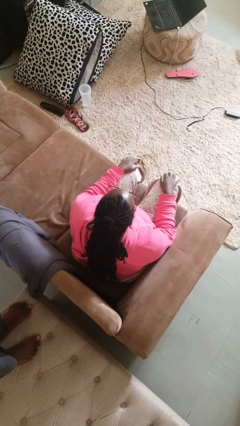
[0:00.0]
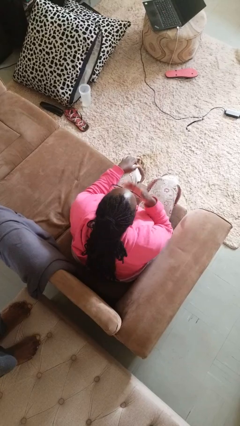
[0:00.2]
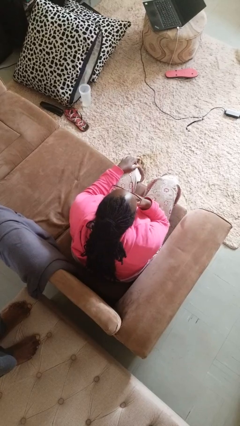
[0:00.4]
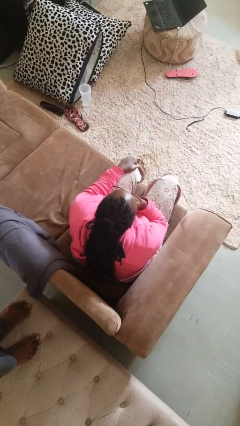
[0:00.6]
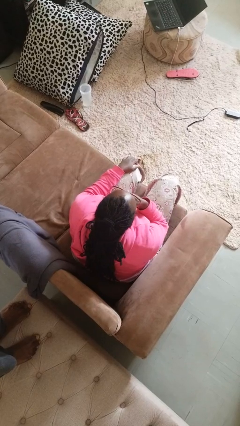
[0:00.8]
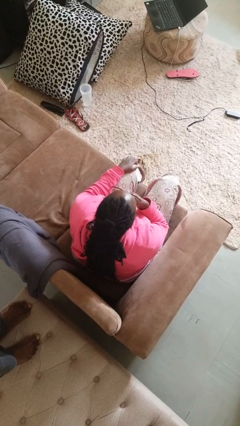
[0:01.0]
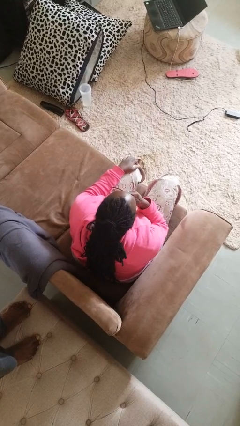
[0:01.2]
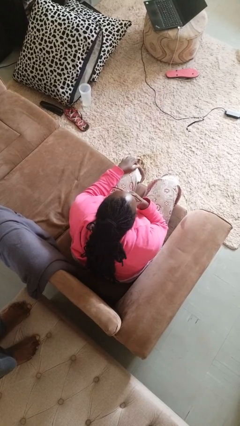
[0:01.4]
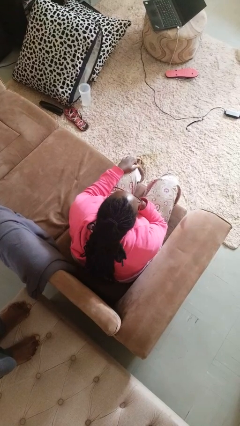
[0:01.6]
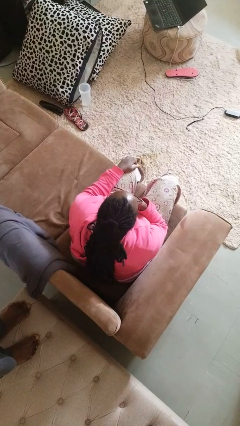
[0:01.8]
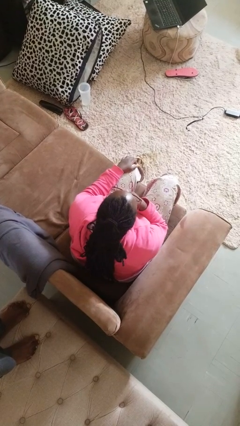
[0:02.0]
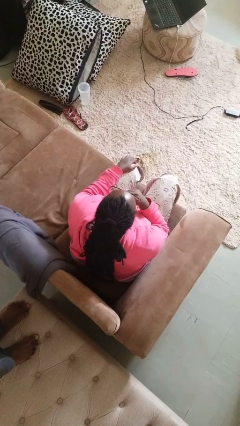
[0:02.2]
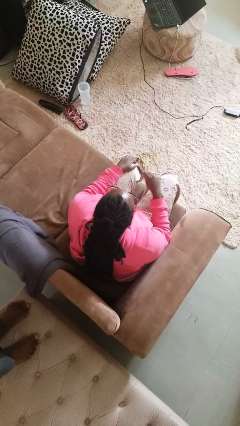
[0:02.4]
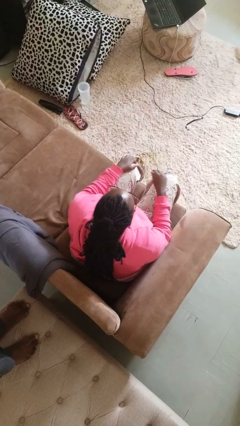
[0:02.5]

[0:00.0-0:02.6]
person strokes chin

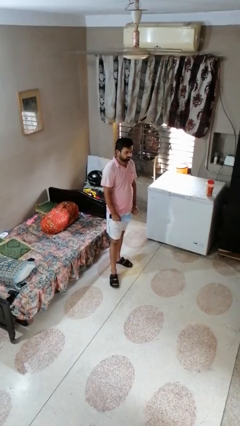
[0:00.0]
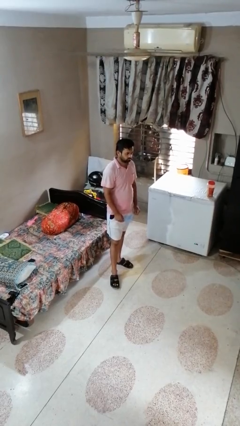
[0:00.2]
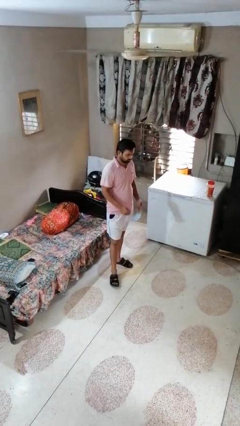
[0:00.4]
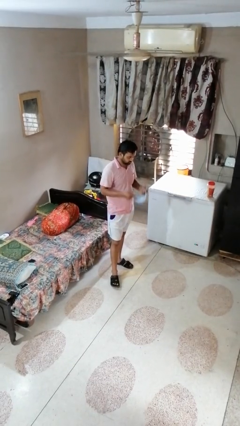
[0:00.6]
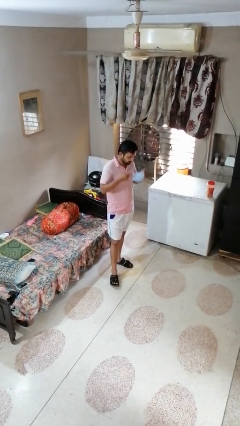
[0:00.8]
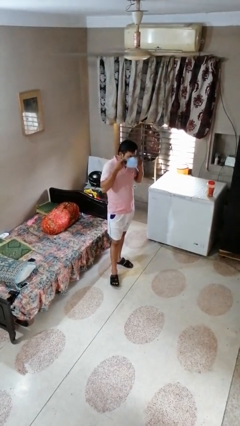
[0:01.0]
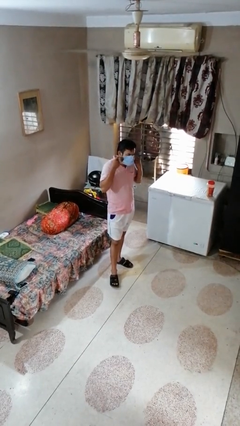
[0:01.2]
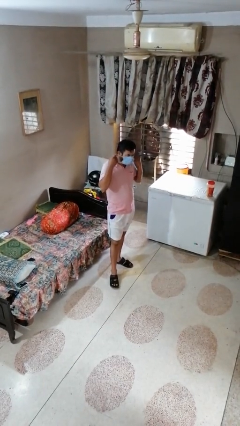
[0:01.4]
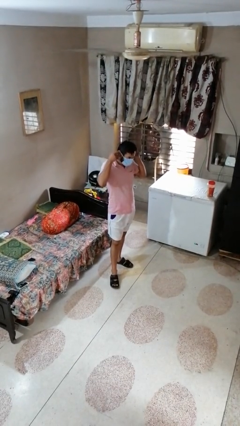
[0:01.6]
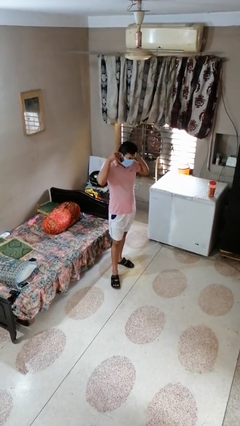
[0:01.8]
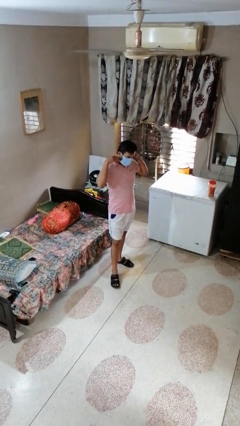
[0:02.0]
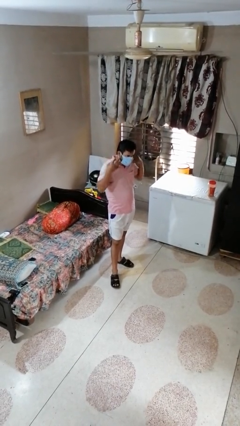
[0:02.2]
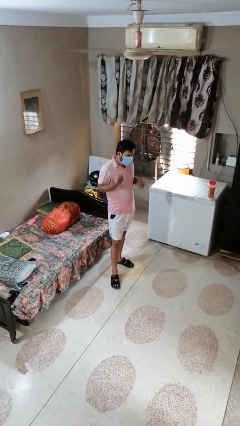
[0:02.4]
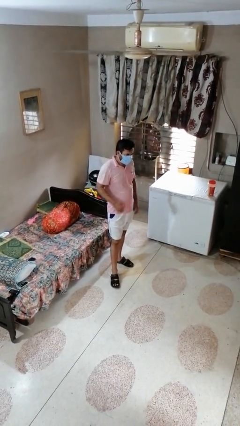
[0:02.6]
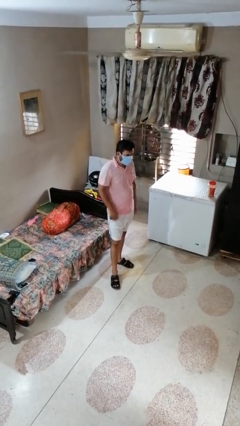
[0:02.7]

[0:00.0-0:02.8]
person puts on facemask

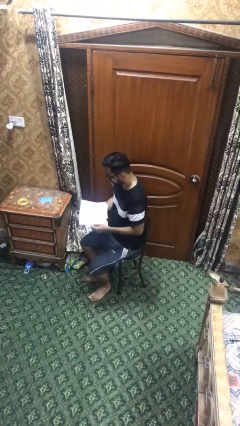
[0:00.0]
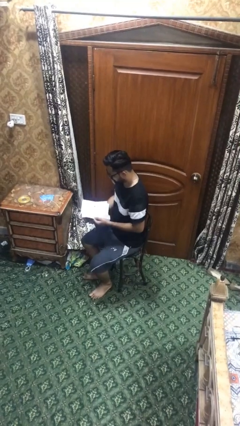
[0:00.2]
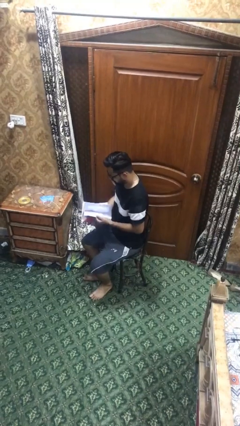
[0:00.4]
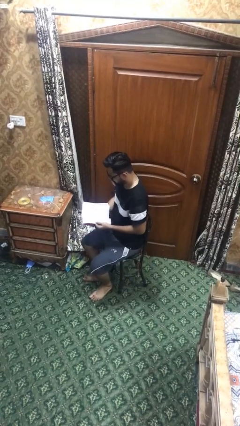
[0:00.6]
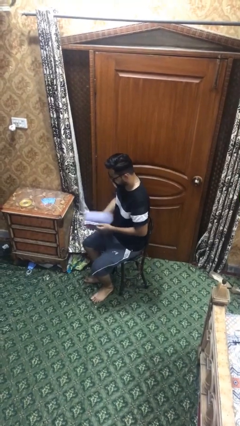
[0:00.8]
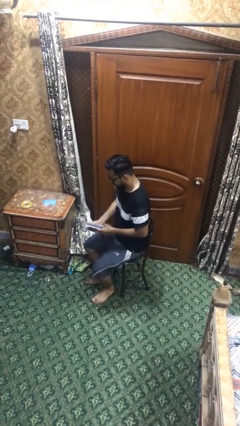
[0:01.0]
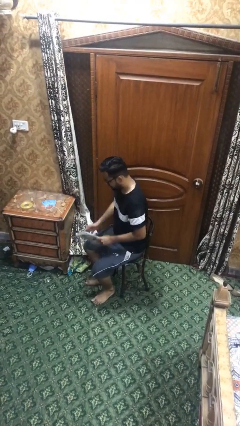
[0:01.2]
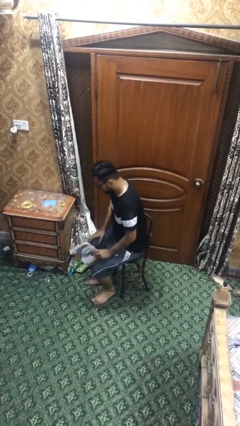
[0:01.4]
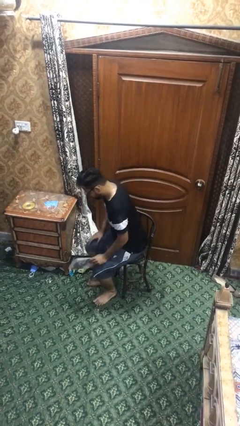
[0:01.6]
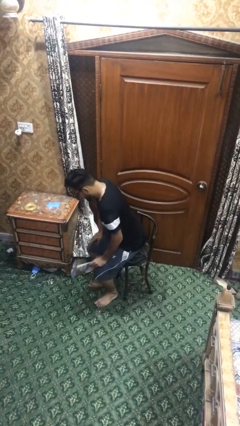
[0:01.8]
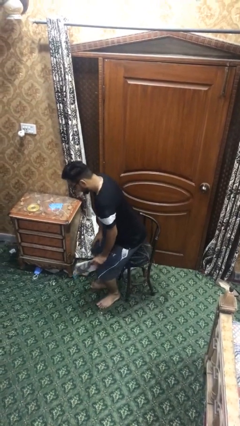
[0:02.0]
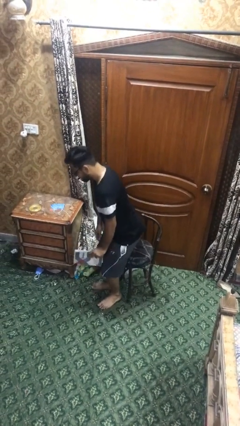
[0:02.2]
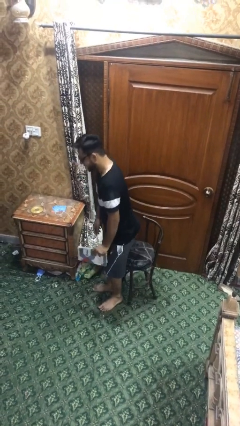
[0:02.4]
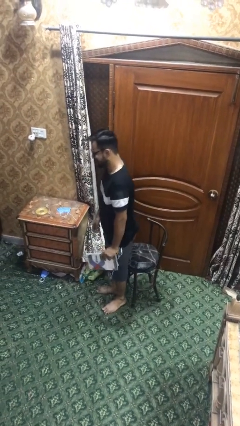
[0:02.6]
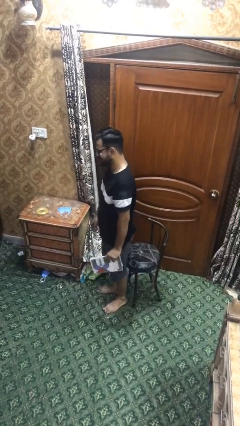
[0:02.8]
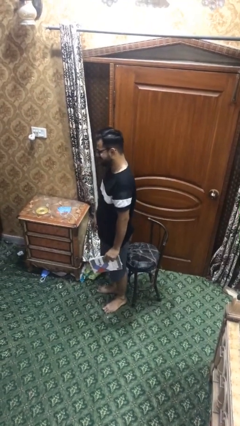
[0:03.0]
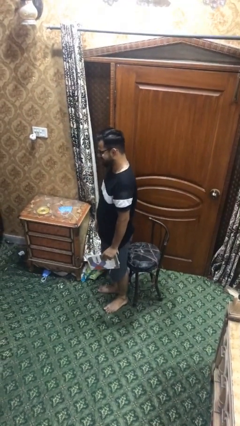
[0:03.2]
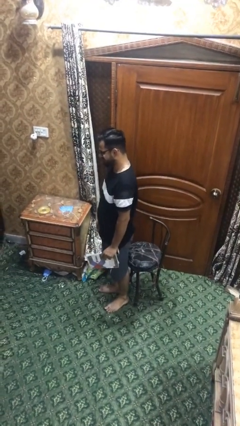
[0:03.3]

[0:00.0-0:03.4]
person stands up

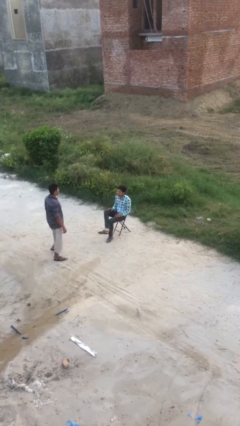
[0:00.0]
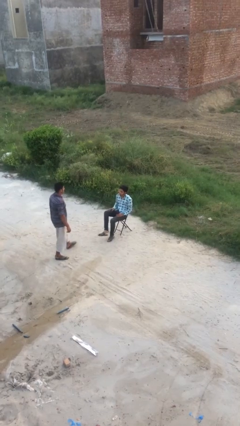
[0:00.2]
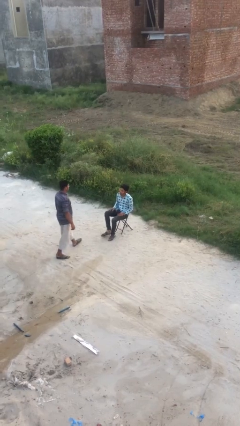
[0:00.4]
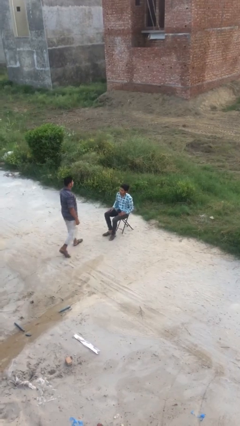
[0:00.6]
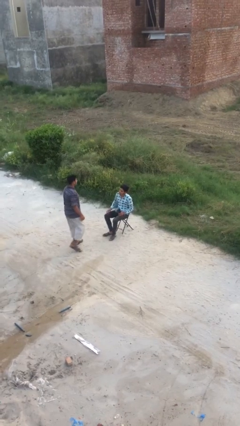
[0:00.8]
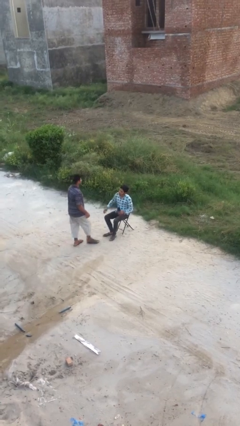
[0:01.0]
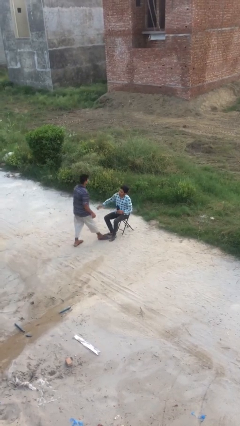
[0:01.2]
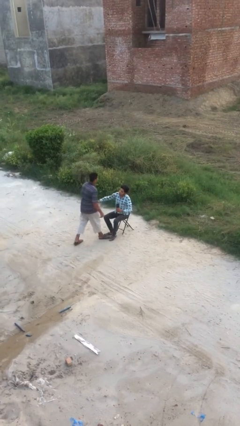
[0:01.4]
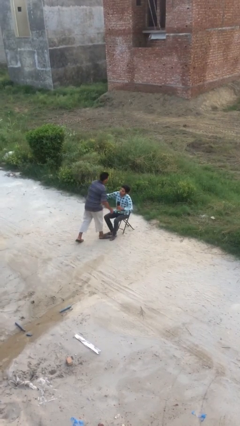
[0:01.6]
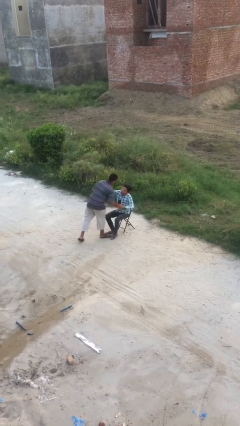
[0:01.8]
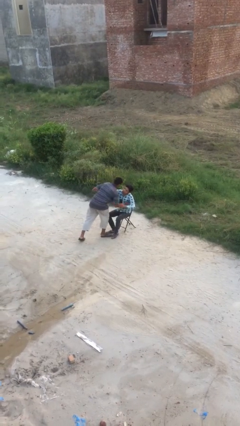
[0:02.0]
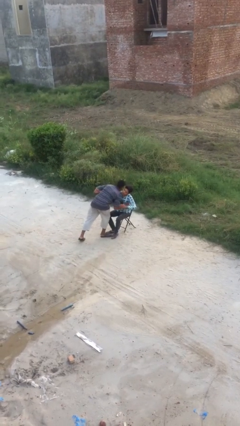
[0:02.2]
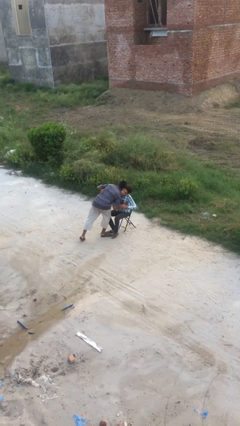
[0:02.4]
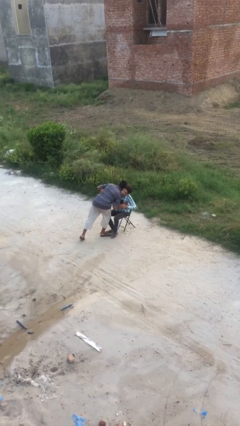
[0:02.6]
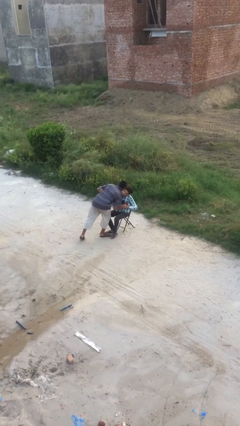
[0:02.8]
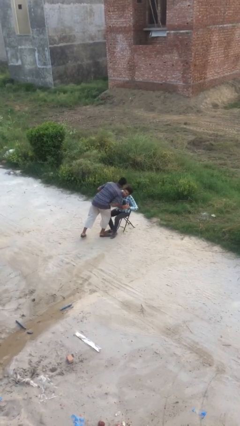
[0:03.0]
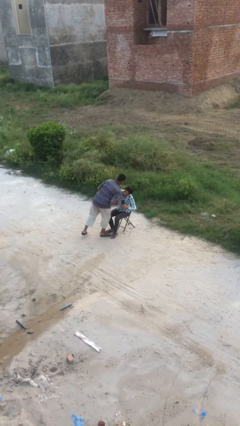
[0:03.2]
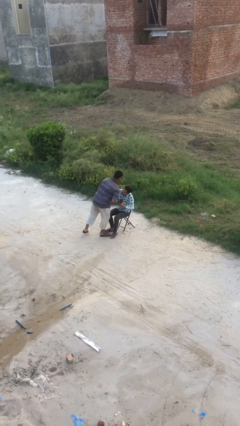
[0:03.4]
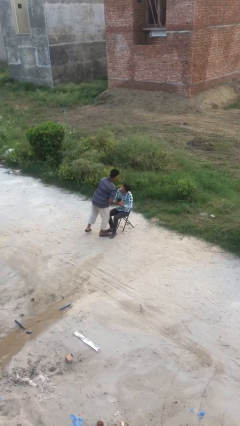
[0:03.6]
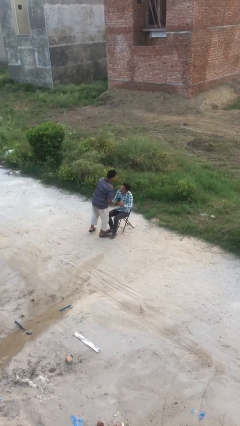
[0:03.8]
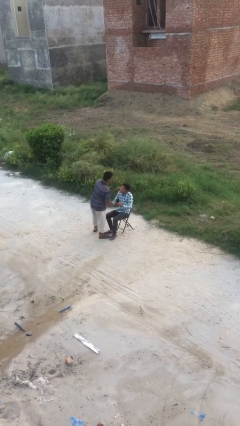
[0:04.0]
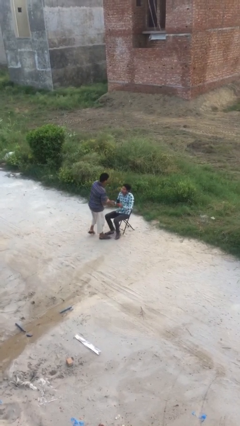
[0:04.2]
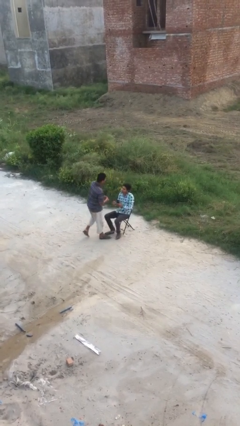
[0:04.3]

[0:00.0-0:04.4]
person embraces person

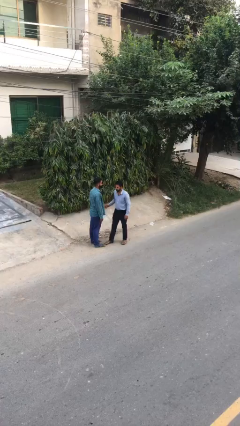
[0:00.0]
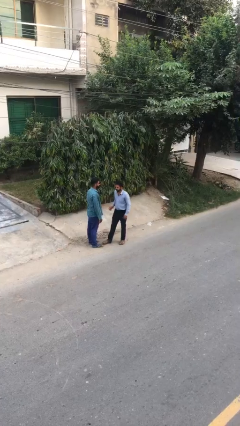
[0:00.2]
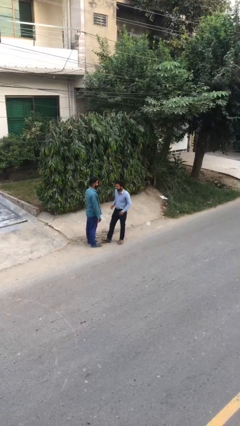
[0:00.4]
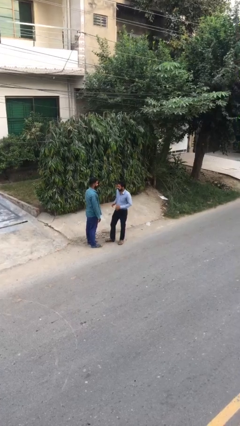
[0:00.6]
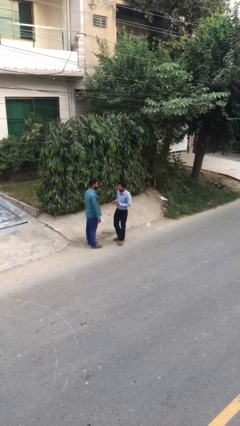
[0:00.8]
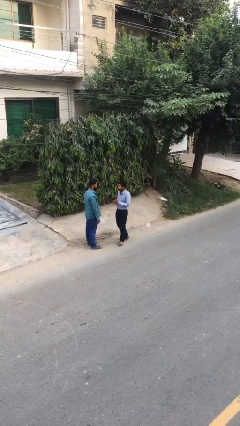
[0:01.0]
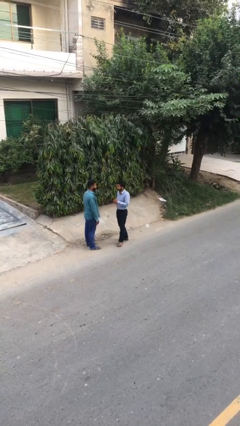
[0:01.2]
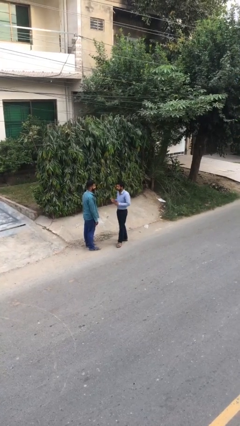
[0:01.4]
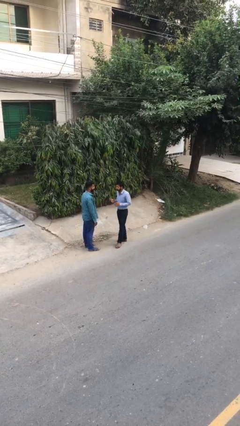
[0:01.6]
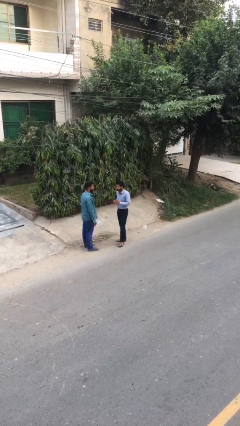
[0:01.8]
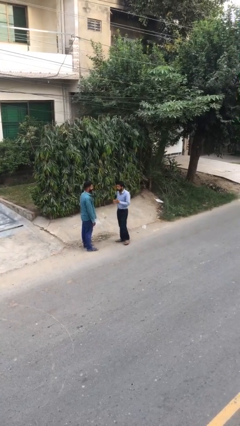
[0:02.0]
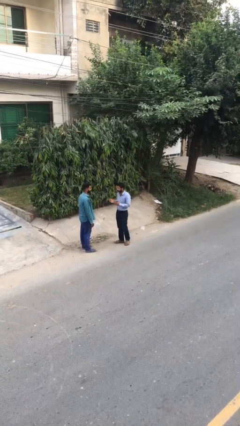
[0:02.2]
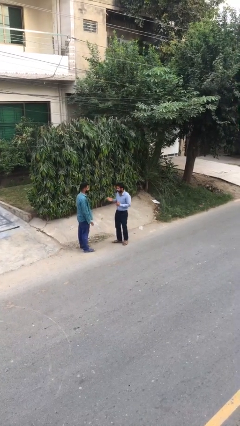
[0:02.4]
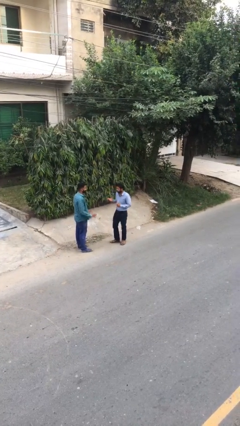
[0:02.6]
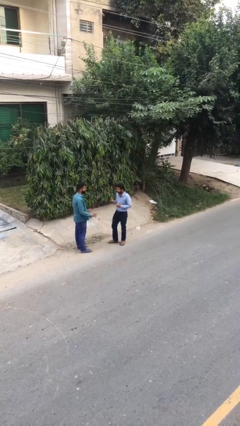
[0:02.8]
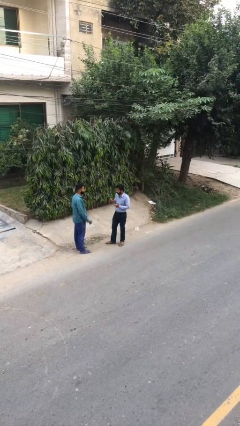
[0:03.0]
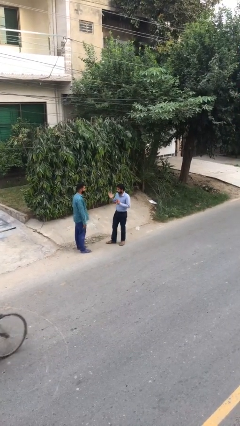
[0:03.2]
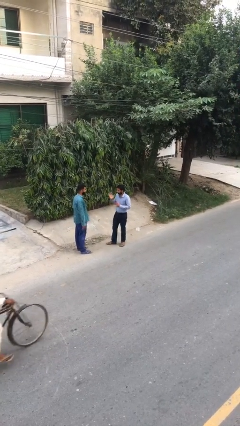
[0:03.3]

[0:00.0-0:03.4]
person talks to person

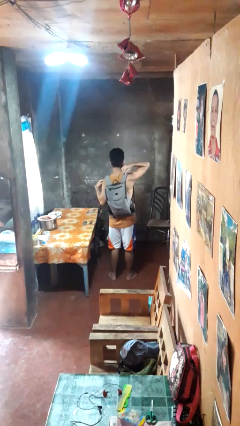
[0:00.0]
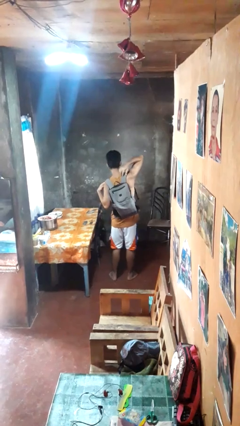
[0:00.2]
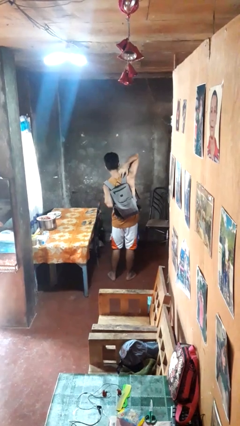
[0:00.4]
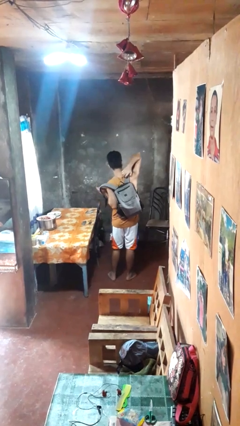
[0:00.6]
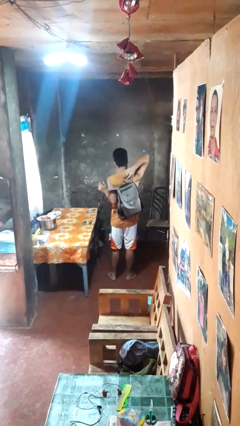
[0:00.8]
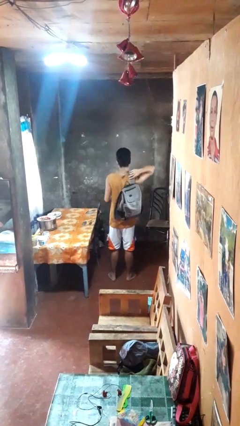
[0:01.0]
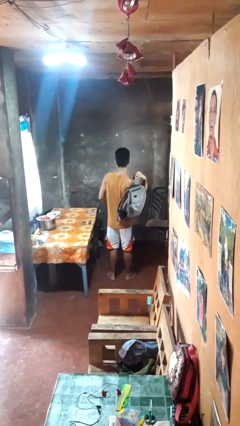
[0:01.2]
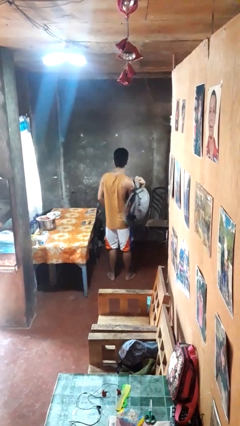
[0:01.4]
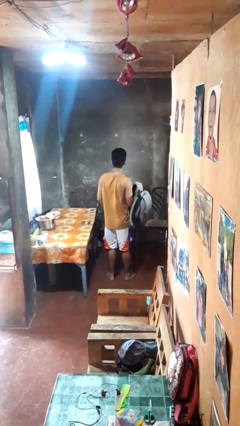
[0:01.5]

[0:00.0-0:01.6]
person takes off backpack
